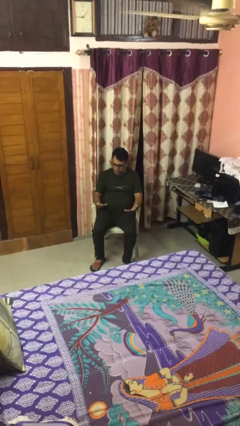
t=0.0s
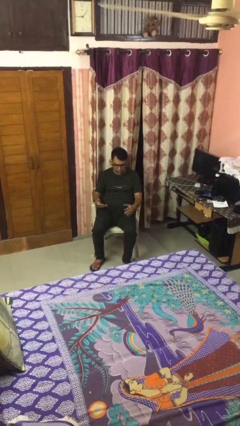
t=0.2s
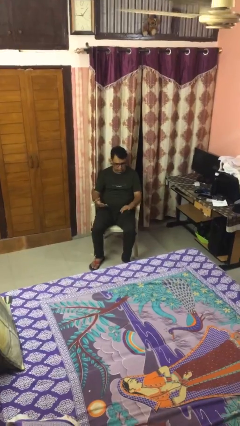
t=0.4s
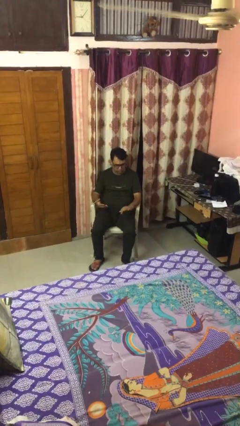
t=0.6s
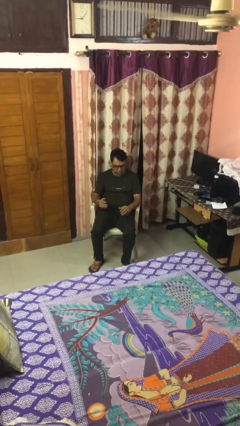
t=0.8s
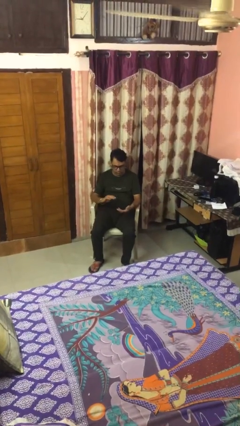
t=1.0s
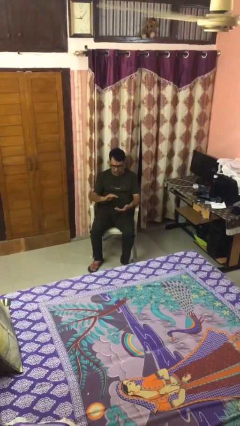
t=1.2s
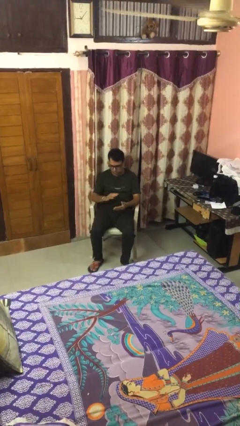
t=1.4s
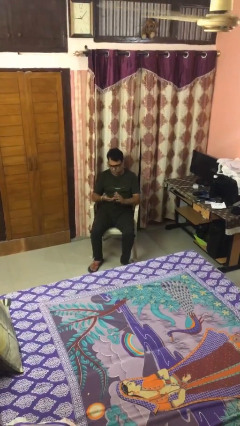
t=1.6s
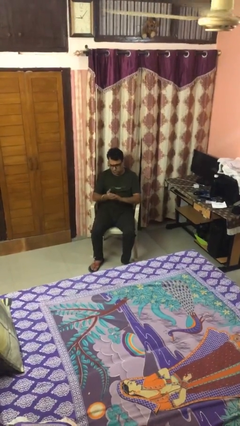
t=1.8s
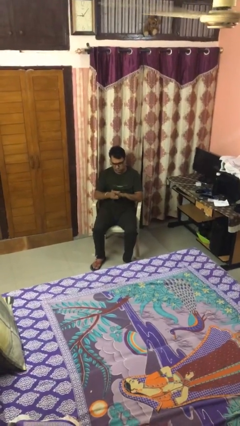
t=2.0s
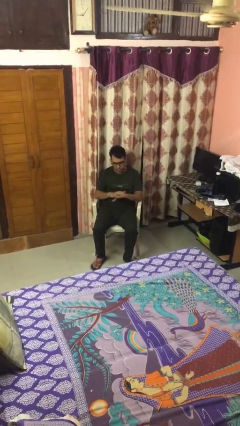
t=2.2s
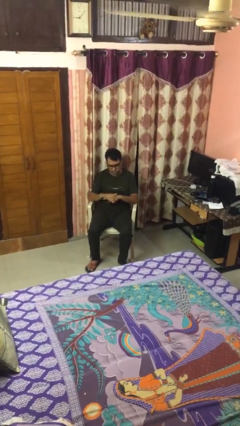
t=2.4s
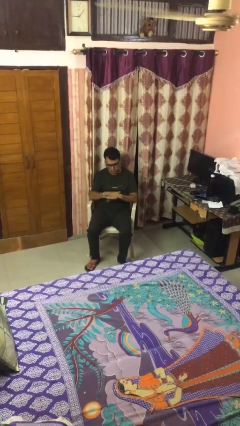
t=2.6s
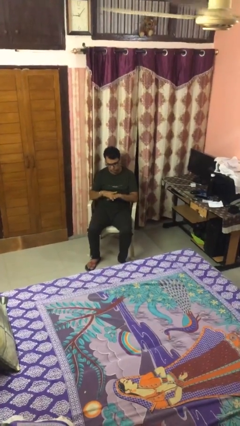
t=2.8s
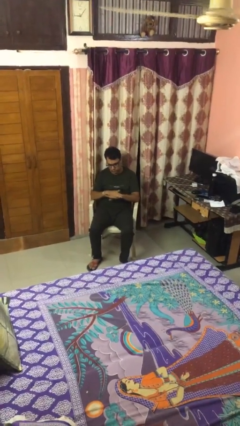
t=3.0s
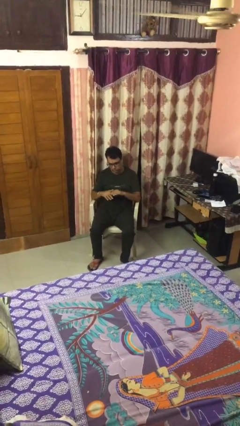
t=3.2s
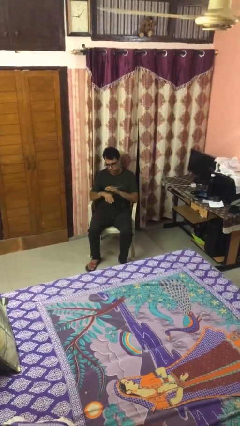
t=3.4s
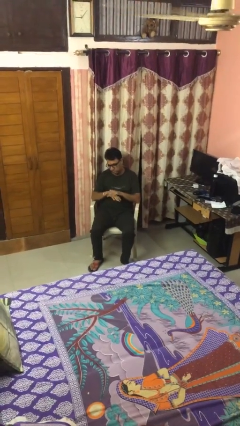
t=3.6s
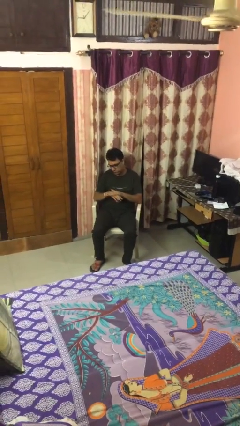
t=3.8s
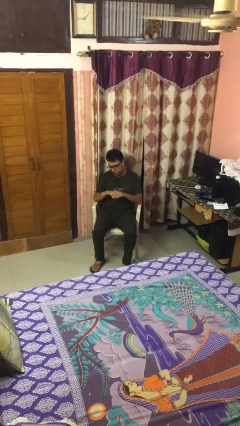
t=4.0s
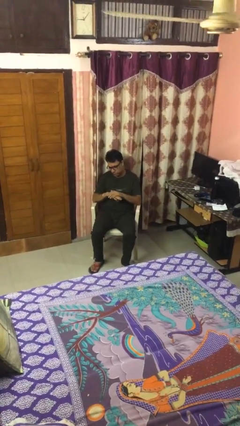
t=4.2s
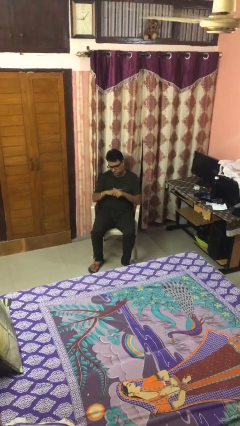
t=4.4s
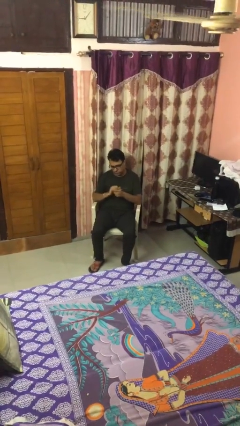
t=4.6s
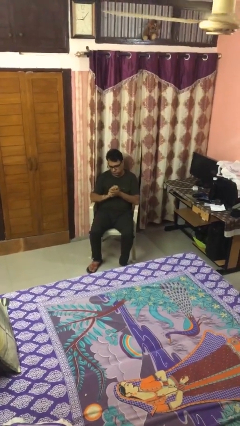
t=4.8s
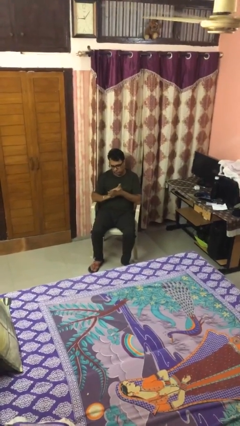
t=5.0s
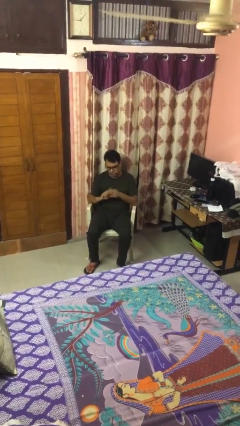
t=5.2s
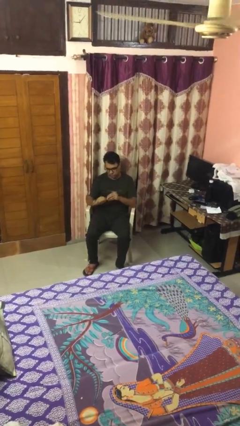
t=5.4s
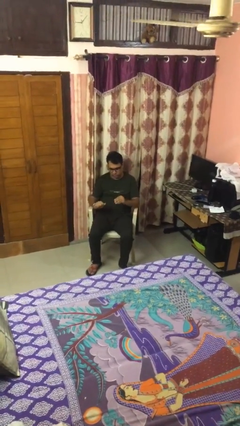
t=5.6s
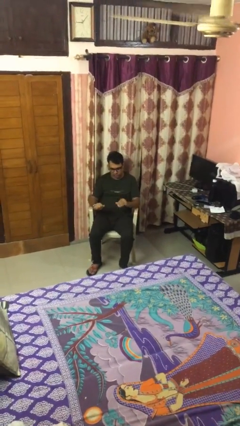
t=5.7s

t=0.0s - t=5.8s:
person looks at hands in lap

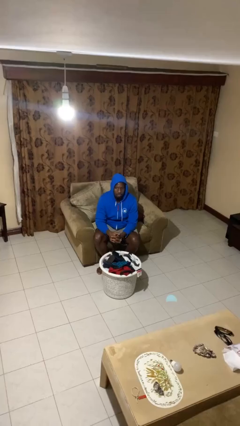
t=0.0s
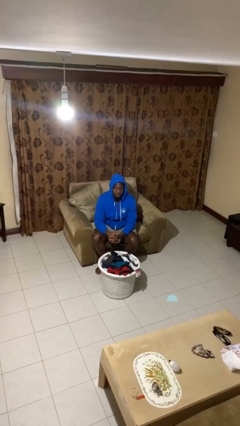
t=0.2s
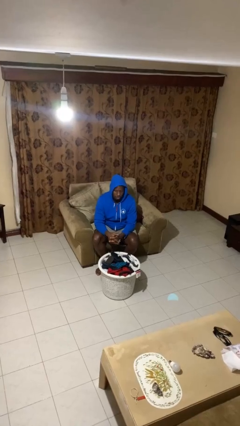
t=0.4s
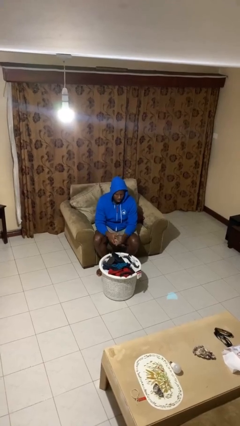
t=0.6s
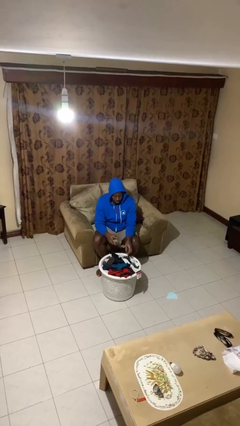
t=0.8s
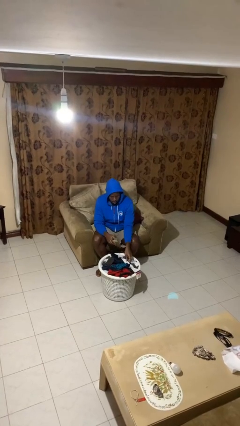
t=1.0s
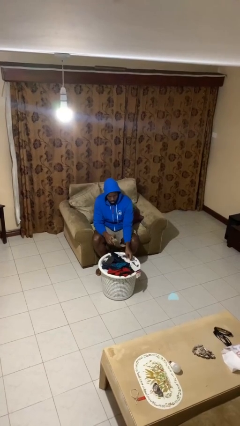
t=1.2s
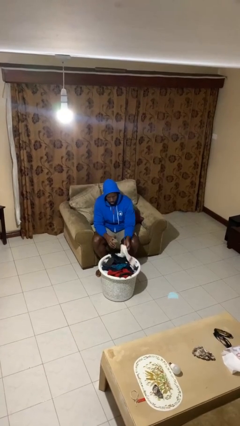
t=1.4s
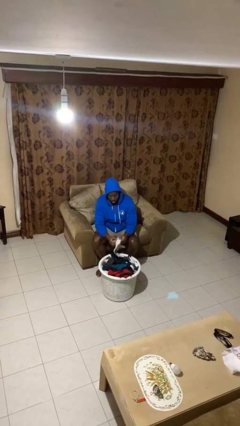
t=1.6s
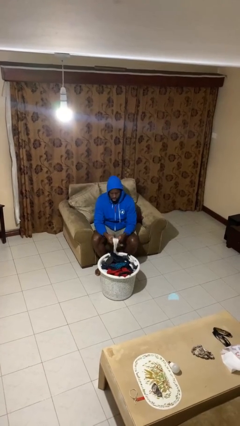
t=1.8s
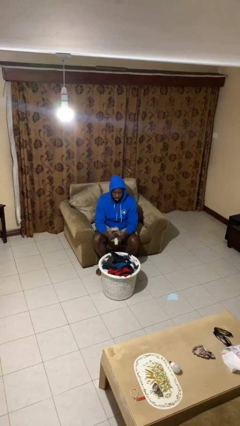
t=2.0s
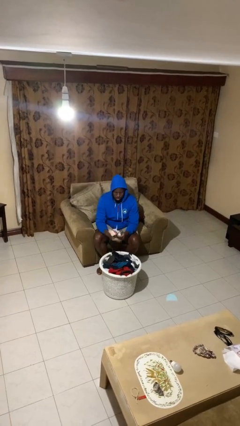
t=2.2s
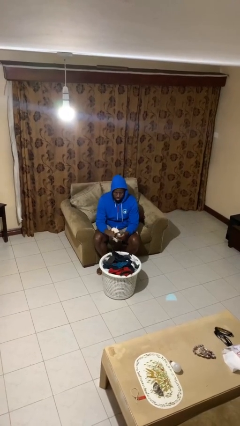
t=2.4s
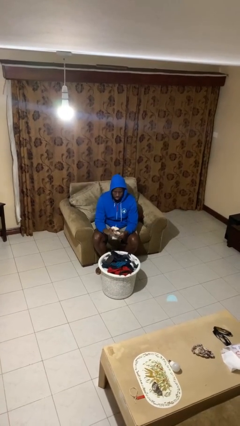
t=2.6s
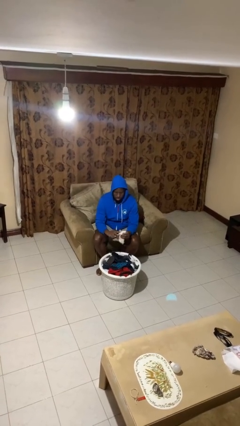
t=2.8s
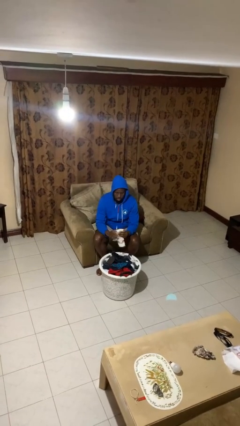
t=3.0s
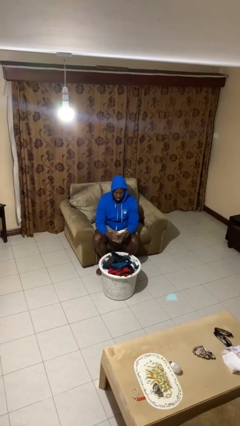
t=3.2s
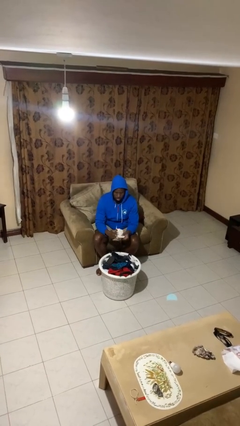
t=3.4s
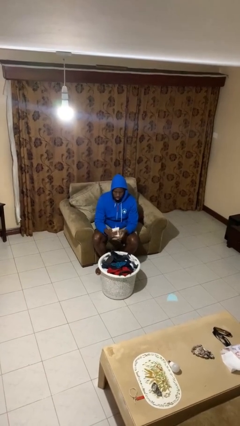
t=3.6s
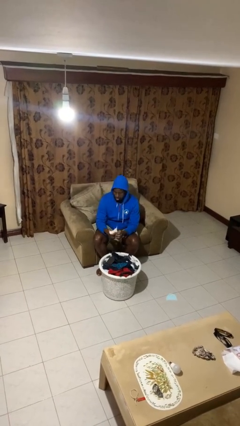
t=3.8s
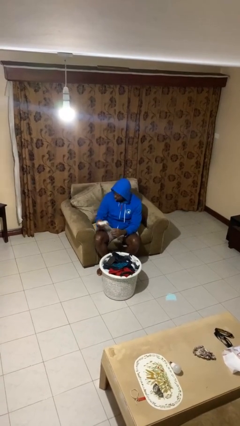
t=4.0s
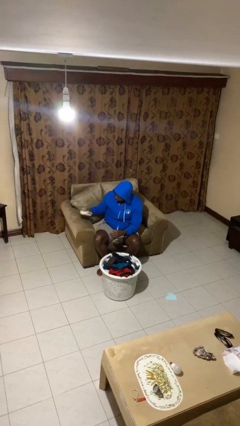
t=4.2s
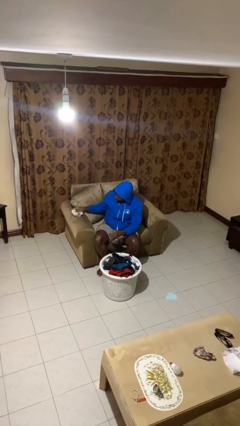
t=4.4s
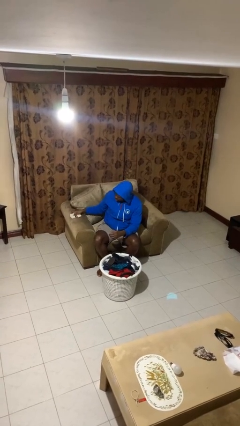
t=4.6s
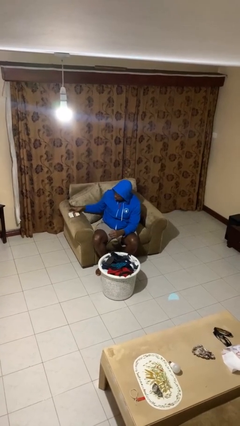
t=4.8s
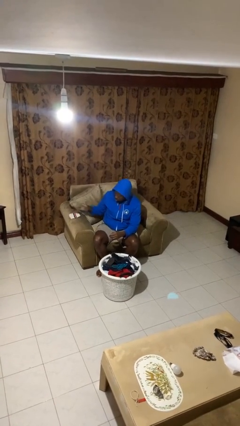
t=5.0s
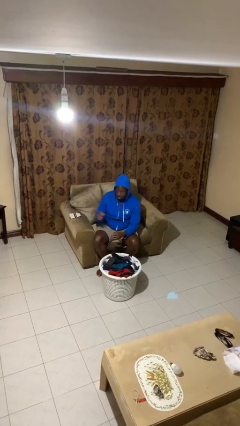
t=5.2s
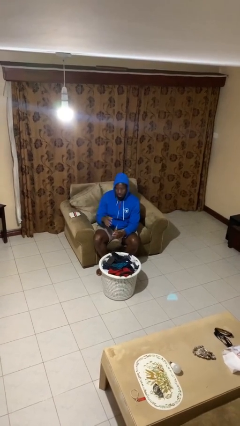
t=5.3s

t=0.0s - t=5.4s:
person folds socks

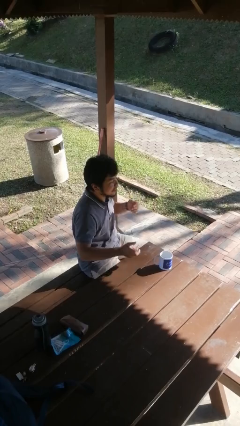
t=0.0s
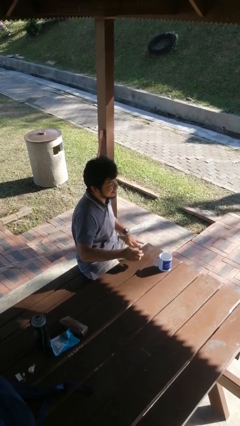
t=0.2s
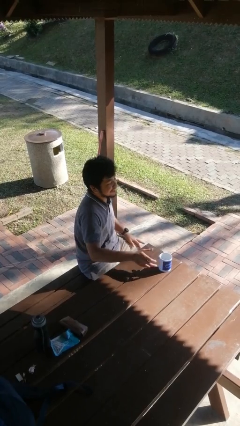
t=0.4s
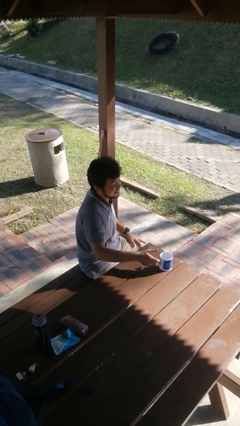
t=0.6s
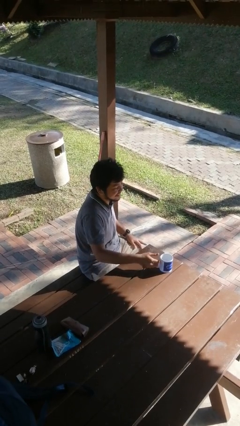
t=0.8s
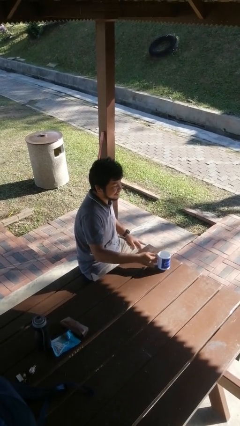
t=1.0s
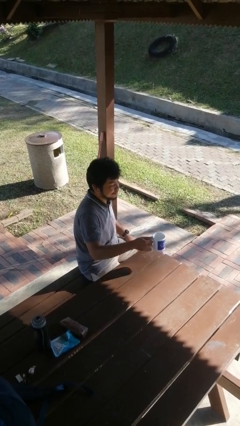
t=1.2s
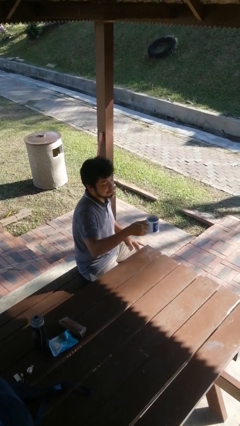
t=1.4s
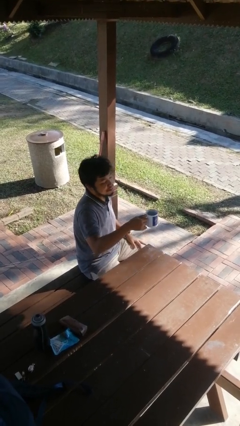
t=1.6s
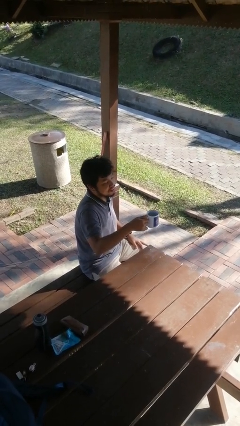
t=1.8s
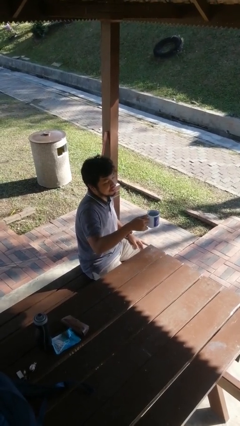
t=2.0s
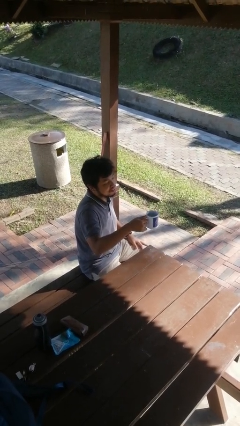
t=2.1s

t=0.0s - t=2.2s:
person picks up object from table

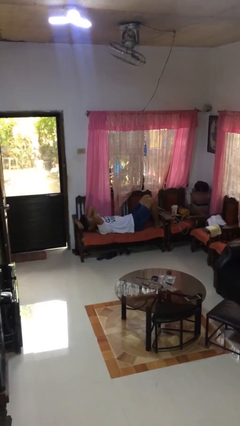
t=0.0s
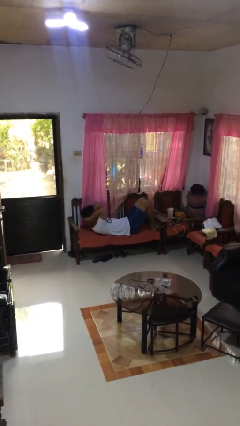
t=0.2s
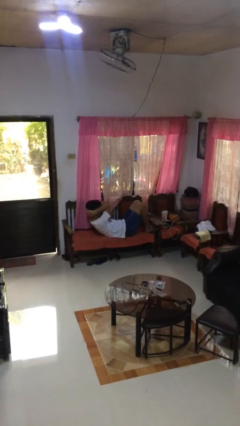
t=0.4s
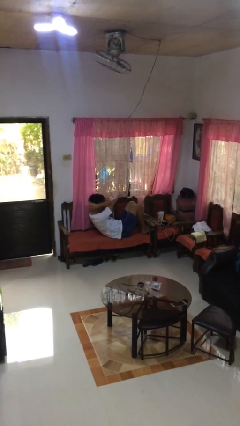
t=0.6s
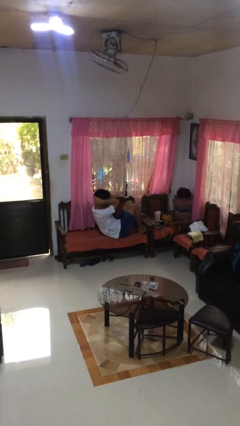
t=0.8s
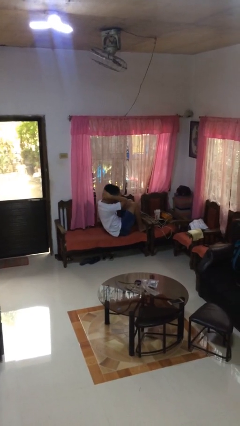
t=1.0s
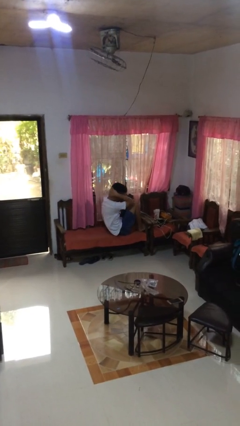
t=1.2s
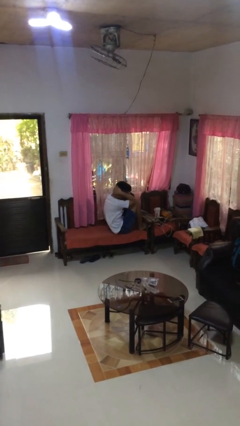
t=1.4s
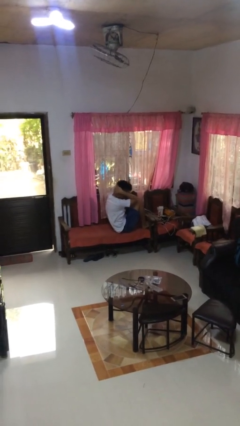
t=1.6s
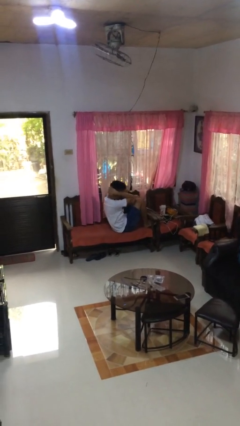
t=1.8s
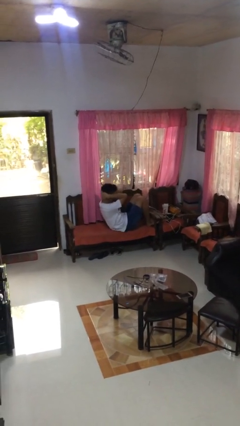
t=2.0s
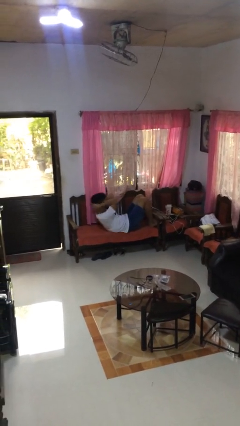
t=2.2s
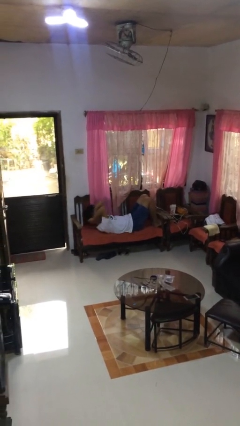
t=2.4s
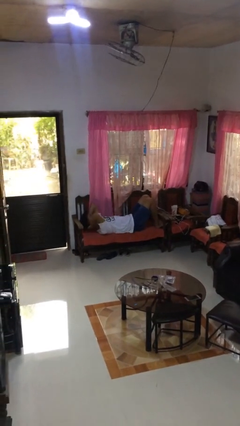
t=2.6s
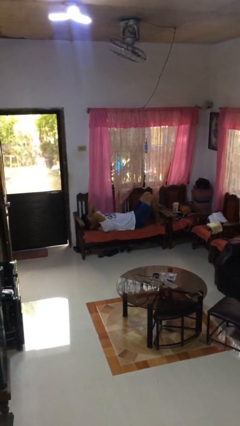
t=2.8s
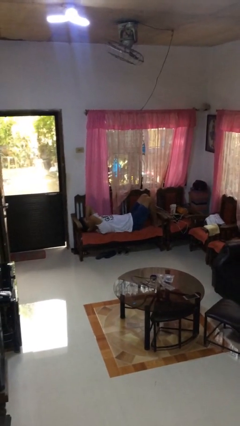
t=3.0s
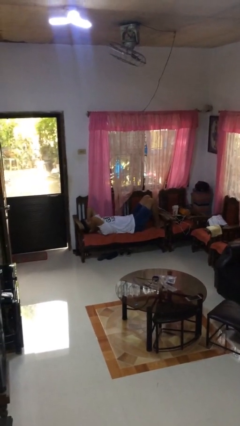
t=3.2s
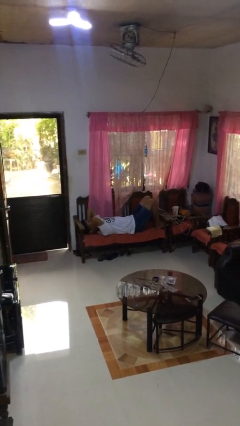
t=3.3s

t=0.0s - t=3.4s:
person exercises with situp

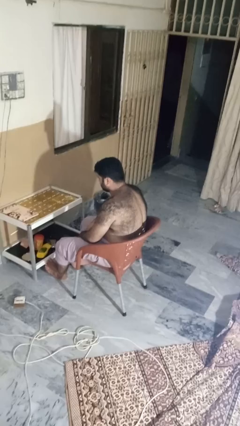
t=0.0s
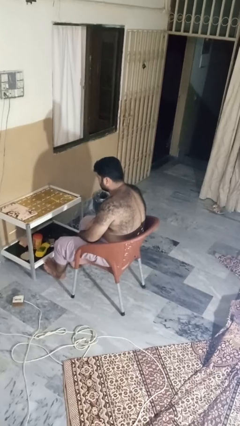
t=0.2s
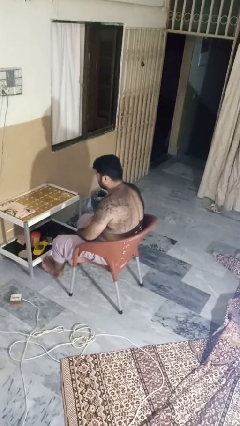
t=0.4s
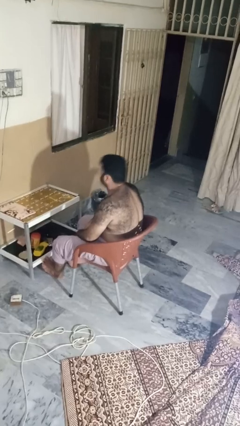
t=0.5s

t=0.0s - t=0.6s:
person sneezes into arm
